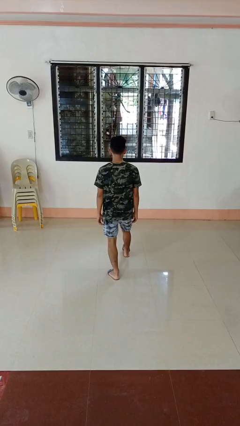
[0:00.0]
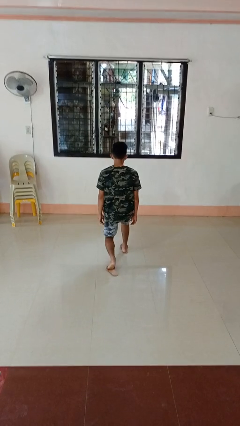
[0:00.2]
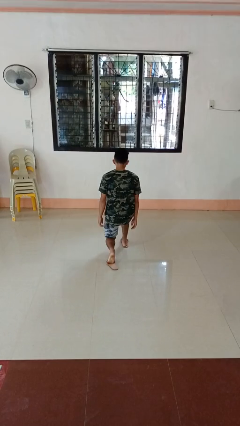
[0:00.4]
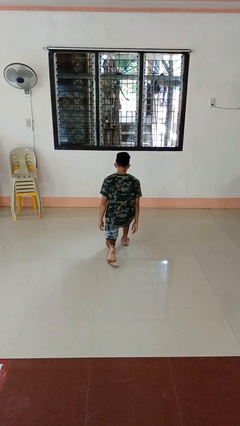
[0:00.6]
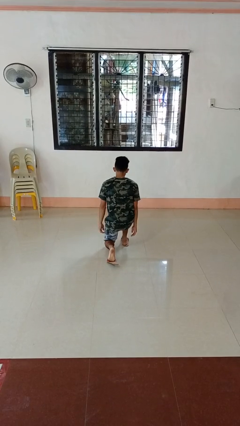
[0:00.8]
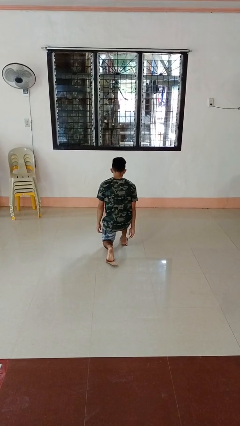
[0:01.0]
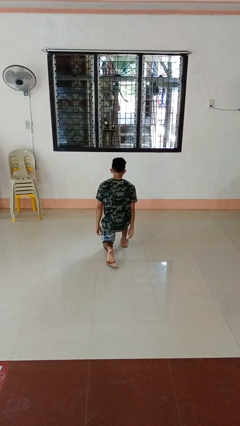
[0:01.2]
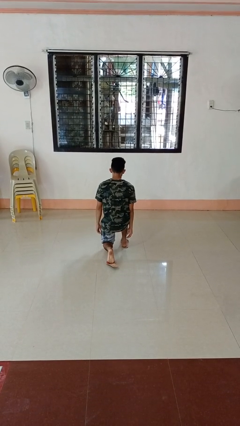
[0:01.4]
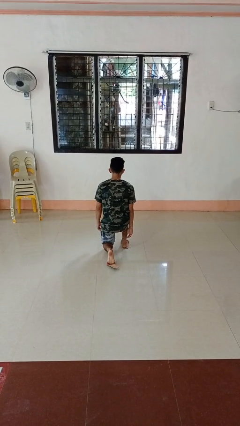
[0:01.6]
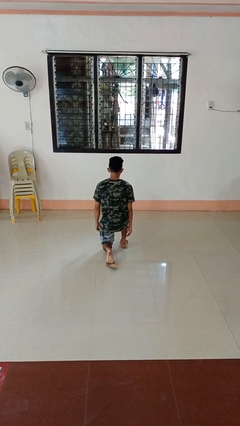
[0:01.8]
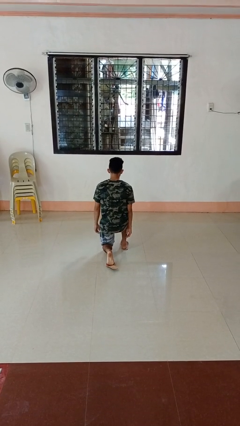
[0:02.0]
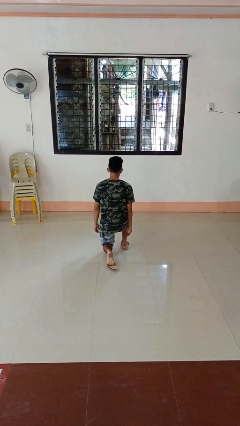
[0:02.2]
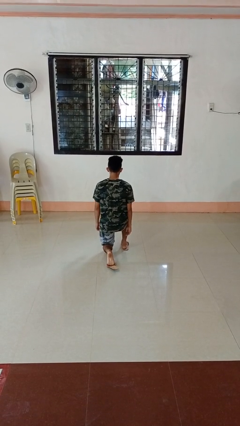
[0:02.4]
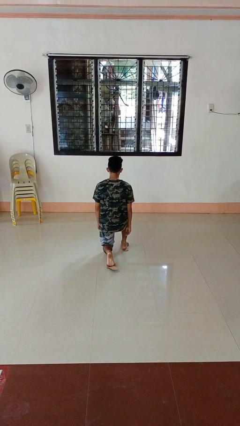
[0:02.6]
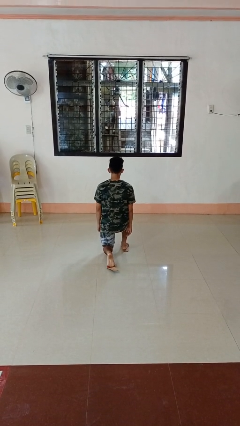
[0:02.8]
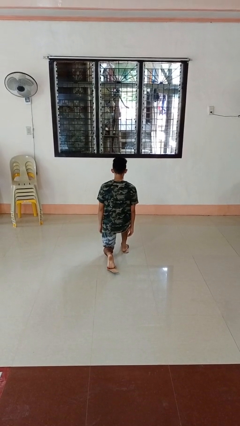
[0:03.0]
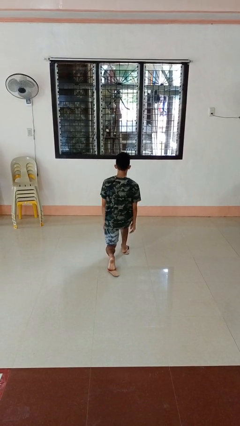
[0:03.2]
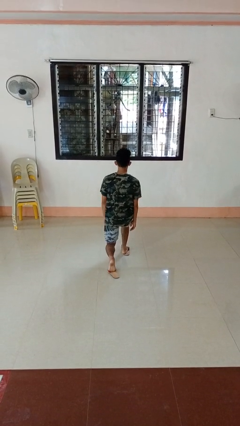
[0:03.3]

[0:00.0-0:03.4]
person kneels

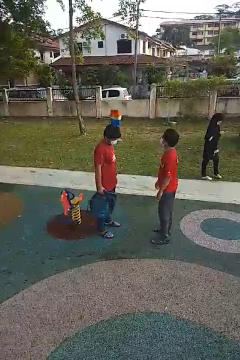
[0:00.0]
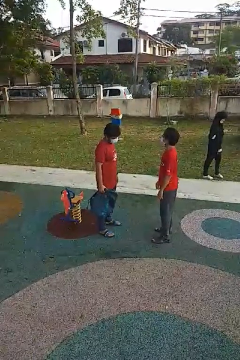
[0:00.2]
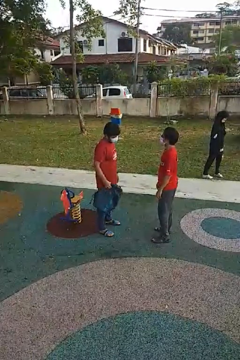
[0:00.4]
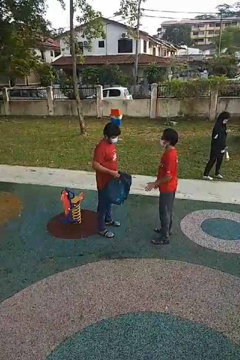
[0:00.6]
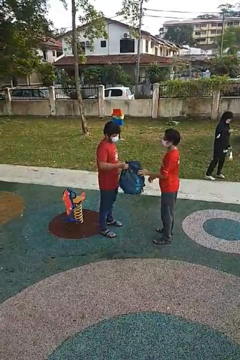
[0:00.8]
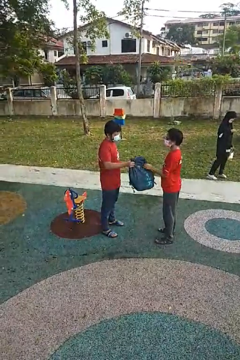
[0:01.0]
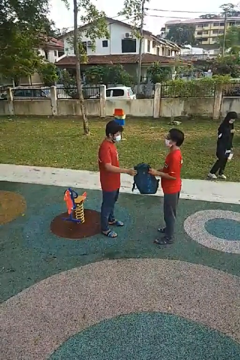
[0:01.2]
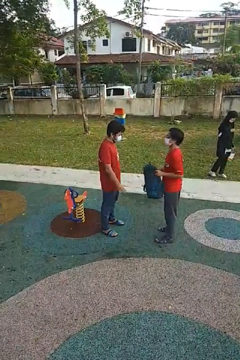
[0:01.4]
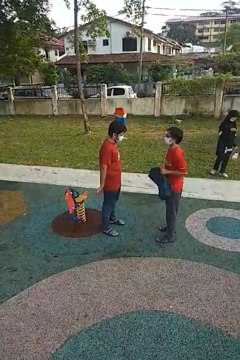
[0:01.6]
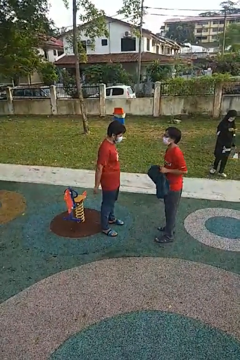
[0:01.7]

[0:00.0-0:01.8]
person transfers object to person

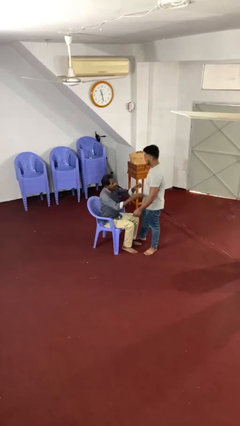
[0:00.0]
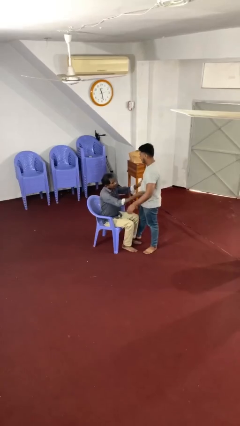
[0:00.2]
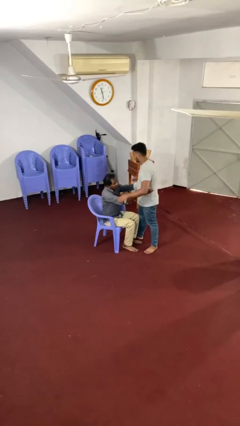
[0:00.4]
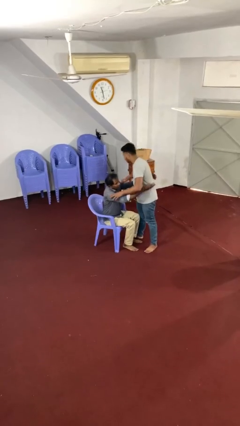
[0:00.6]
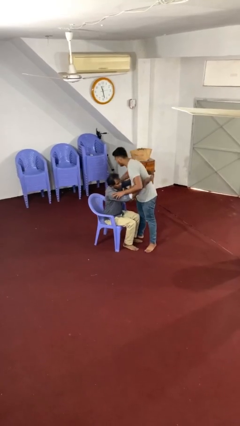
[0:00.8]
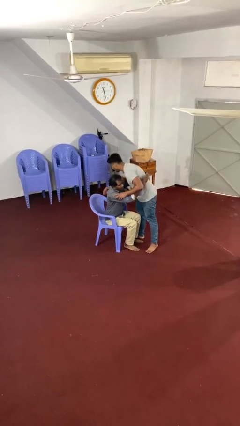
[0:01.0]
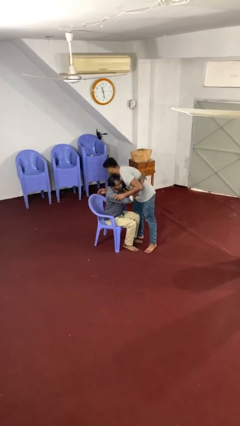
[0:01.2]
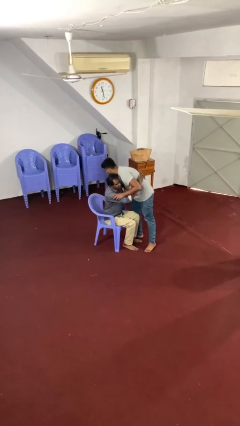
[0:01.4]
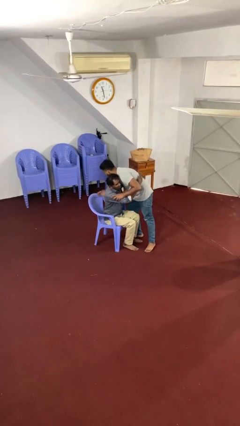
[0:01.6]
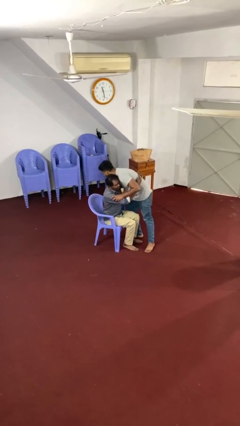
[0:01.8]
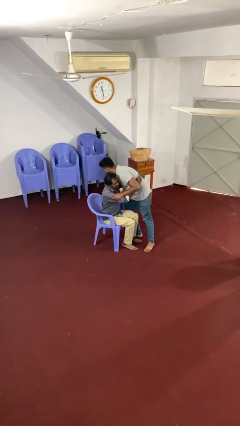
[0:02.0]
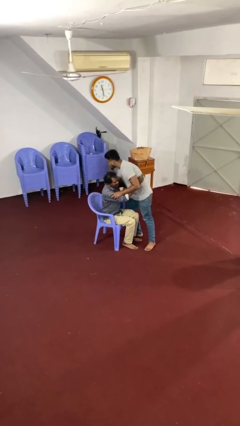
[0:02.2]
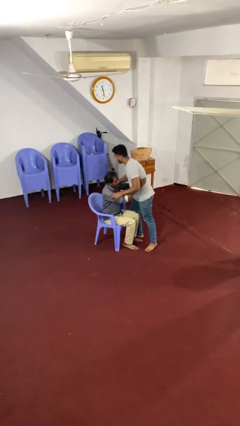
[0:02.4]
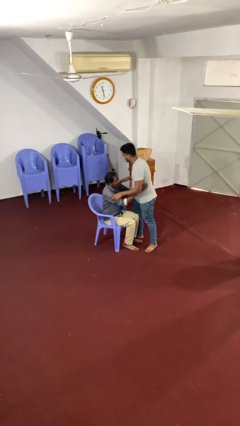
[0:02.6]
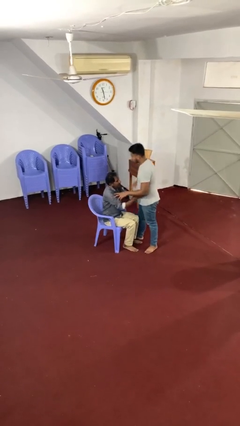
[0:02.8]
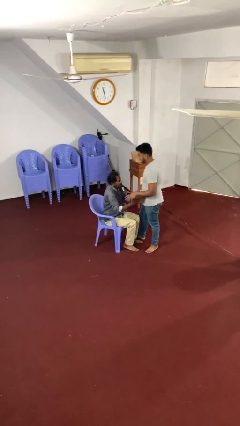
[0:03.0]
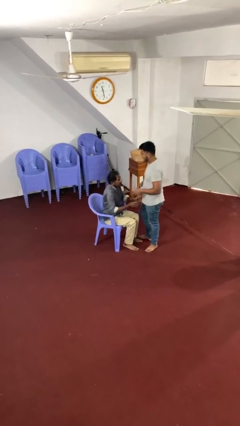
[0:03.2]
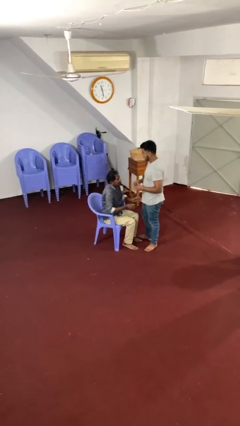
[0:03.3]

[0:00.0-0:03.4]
person embraces person

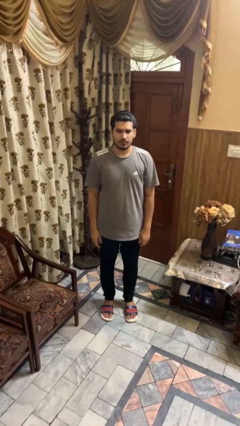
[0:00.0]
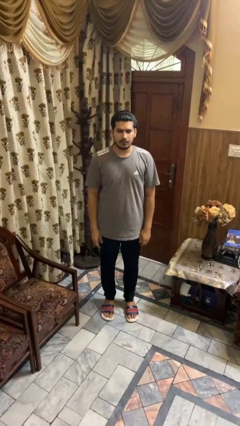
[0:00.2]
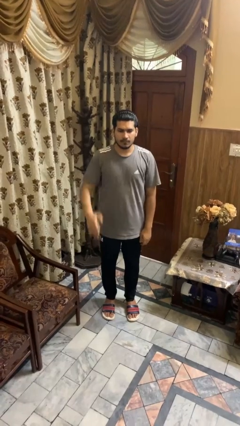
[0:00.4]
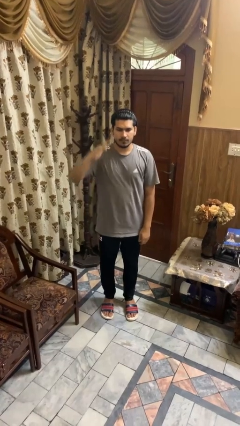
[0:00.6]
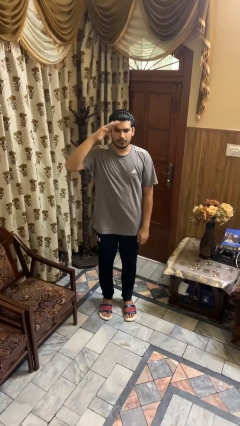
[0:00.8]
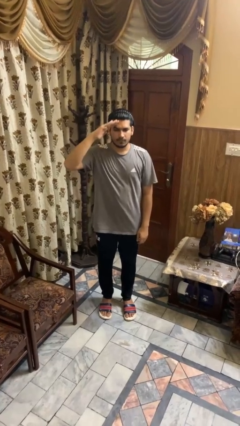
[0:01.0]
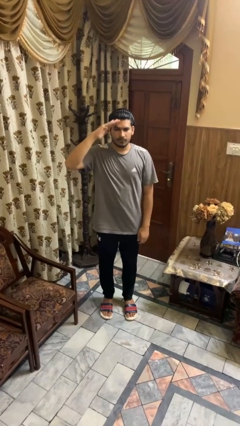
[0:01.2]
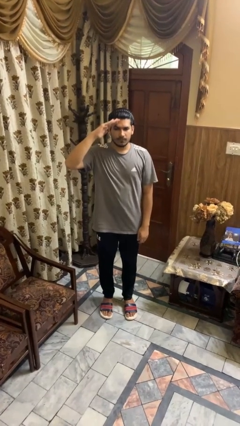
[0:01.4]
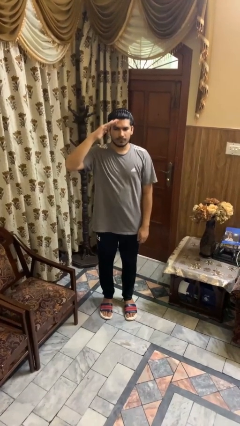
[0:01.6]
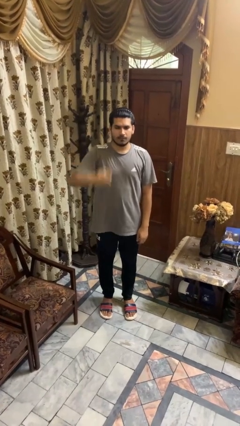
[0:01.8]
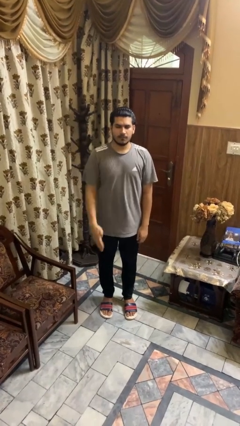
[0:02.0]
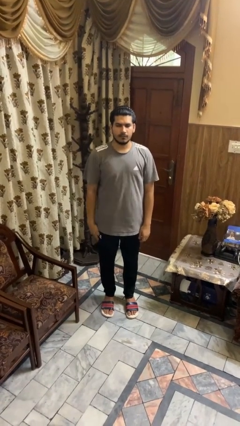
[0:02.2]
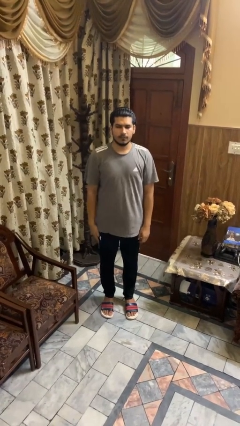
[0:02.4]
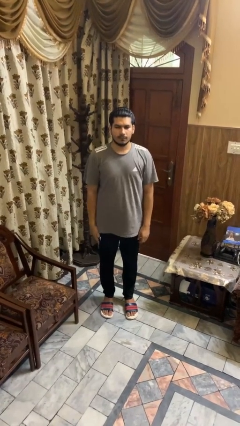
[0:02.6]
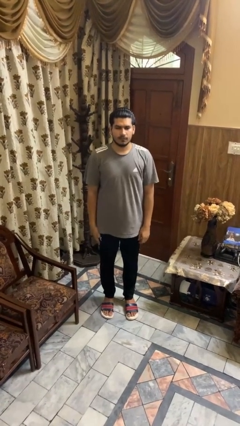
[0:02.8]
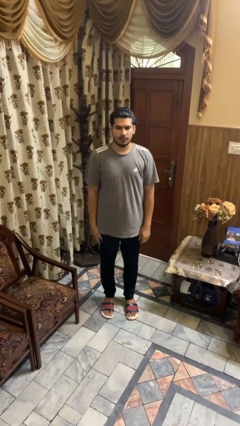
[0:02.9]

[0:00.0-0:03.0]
person salutes

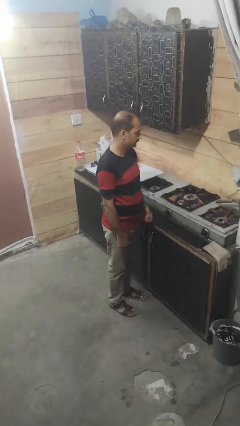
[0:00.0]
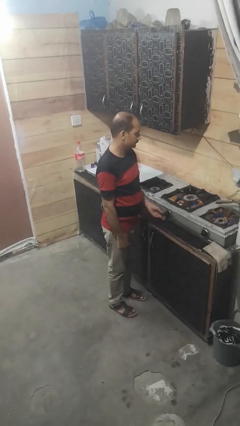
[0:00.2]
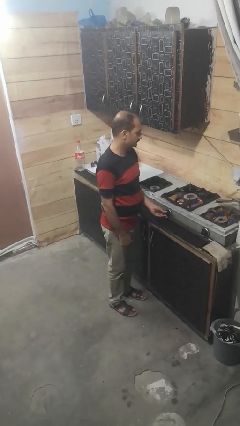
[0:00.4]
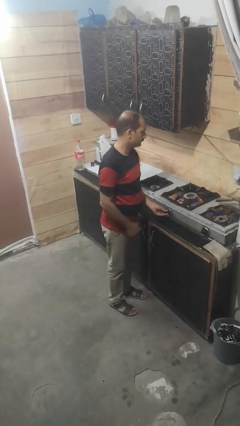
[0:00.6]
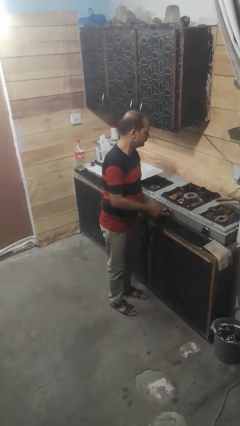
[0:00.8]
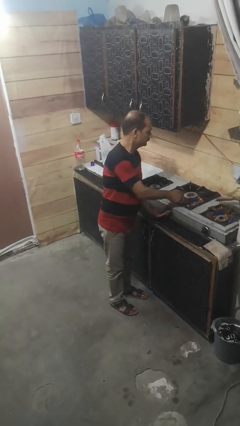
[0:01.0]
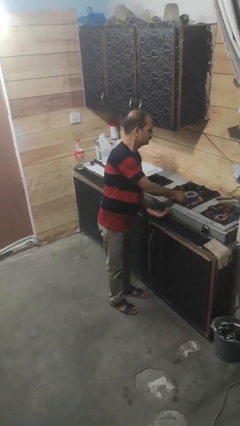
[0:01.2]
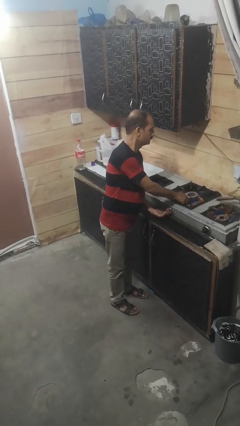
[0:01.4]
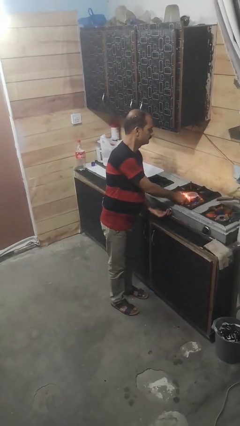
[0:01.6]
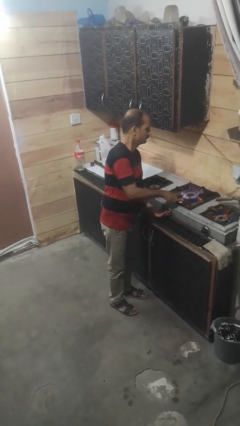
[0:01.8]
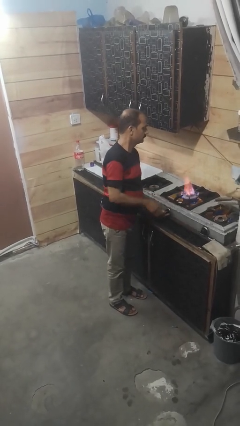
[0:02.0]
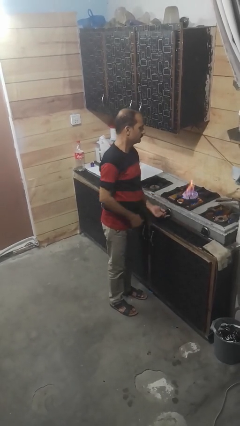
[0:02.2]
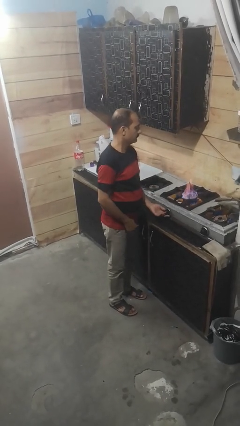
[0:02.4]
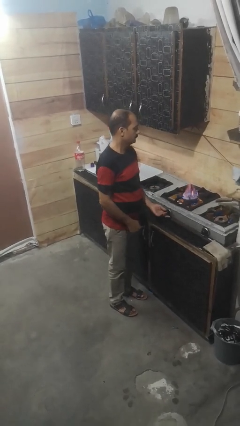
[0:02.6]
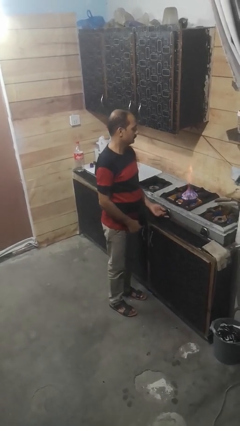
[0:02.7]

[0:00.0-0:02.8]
person turns on stovetop

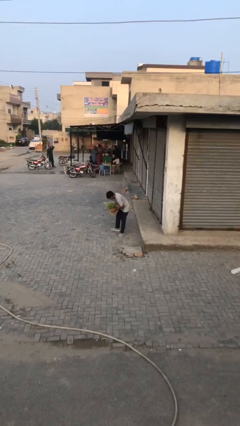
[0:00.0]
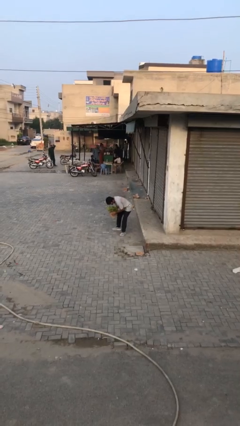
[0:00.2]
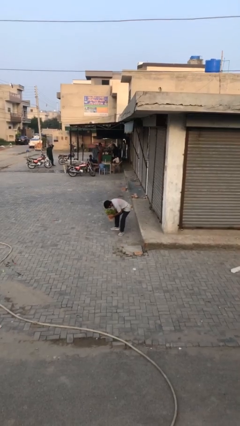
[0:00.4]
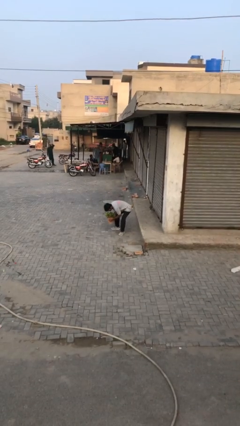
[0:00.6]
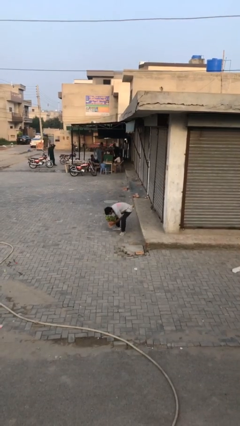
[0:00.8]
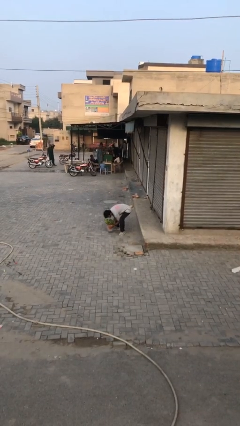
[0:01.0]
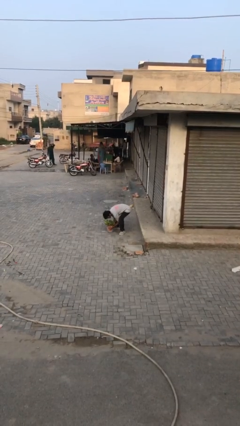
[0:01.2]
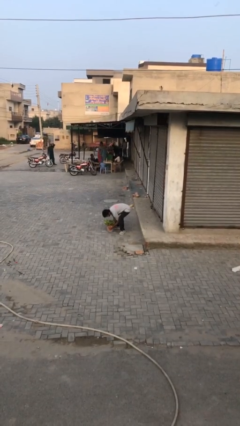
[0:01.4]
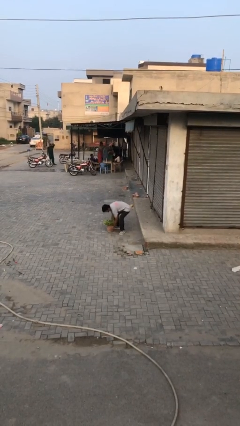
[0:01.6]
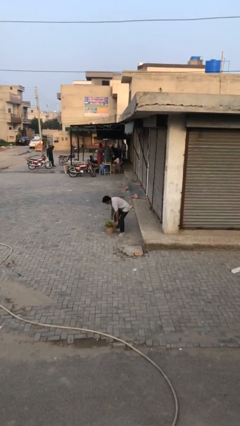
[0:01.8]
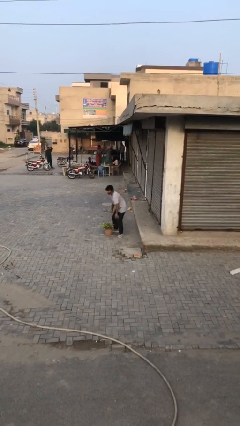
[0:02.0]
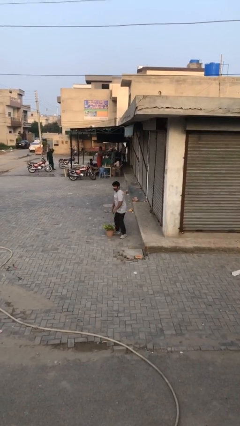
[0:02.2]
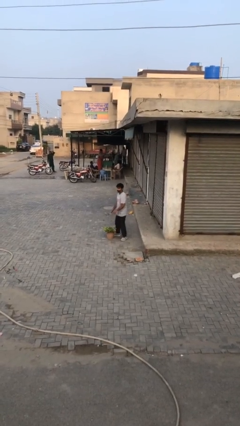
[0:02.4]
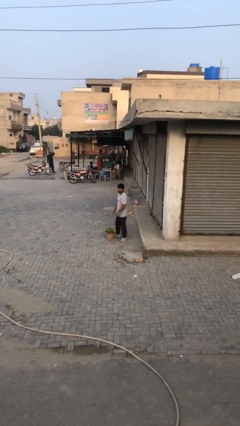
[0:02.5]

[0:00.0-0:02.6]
person puts down object on floor

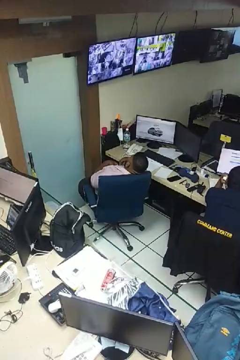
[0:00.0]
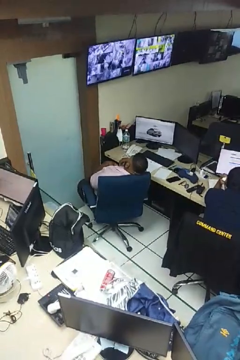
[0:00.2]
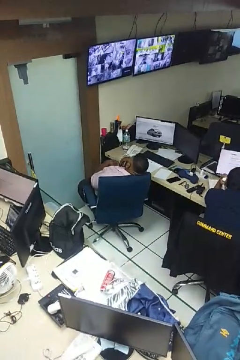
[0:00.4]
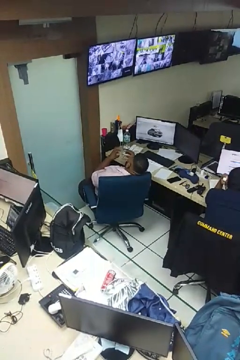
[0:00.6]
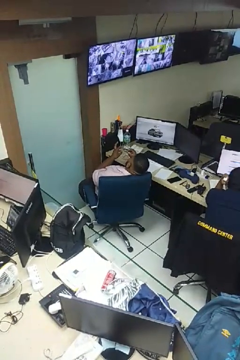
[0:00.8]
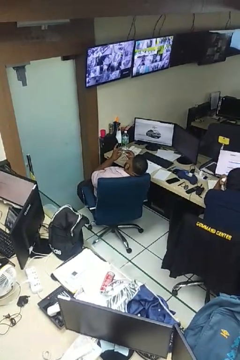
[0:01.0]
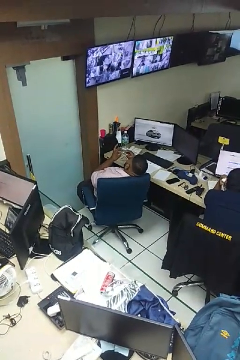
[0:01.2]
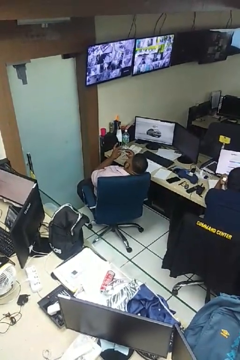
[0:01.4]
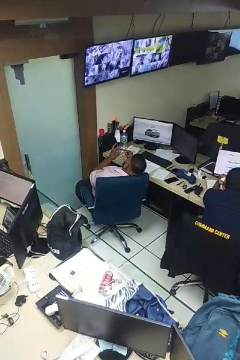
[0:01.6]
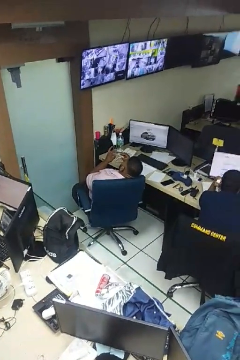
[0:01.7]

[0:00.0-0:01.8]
person clips fingernails
